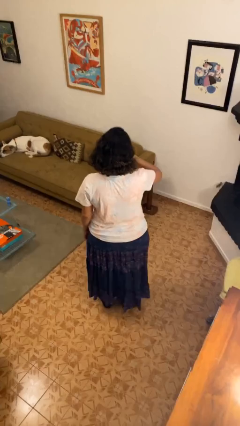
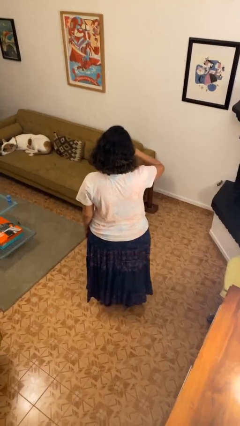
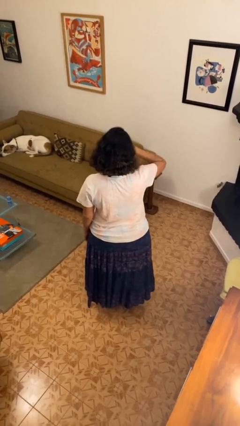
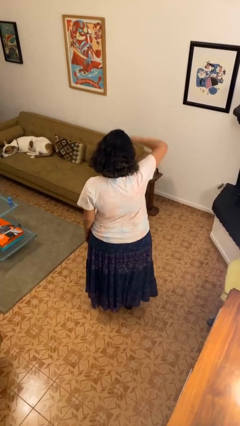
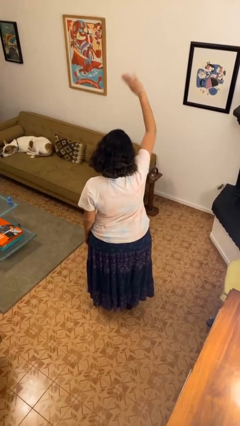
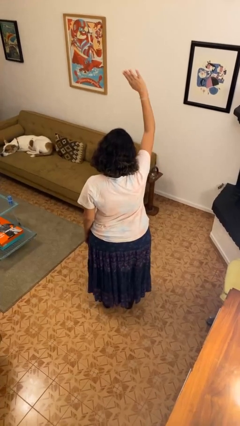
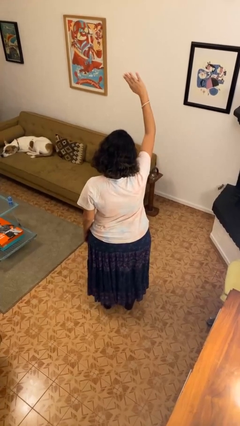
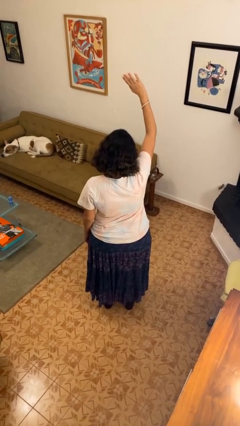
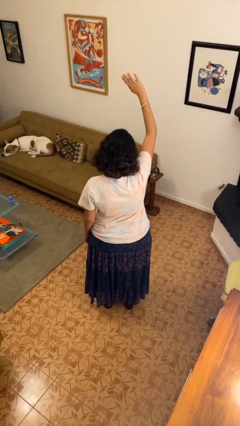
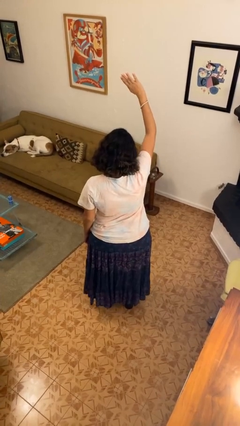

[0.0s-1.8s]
person gestures swipe up

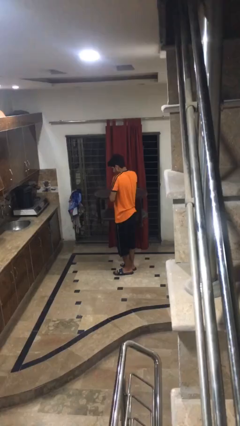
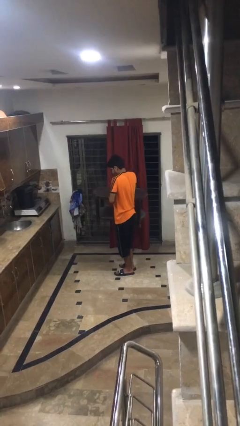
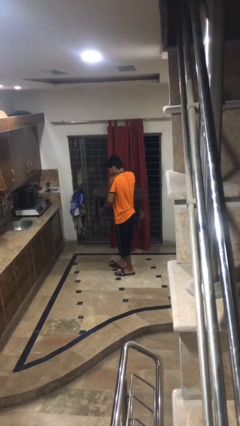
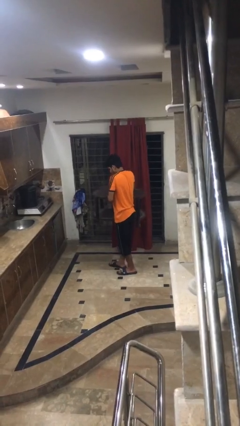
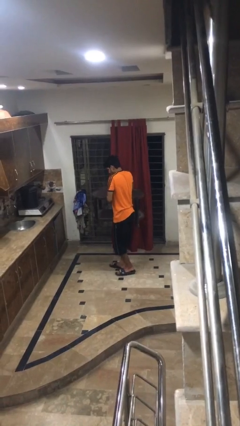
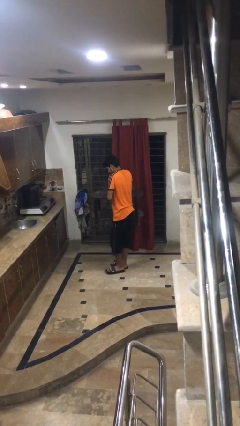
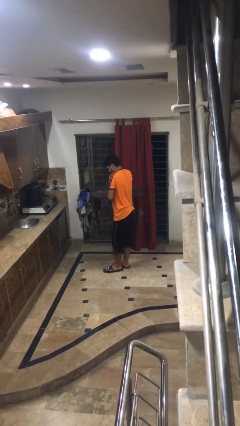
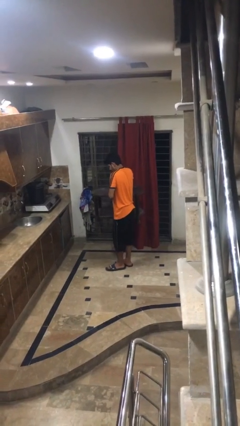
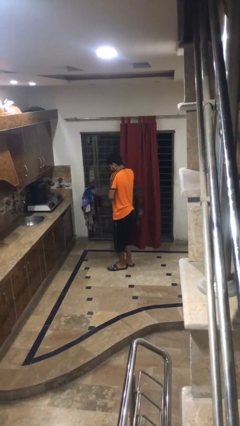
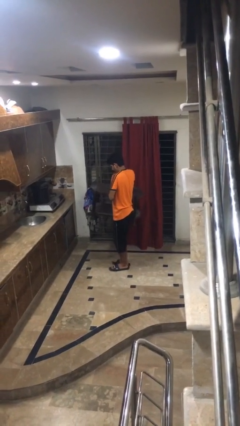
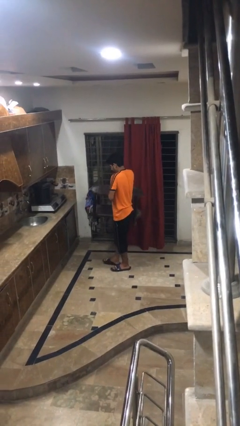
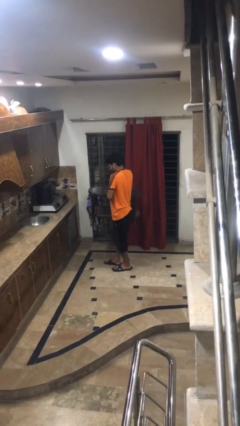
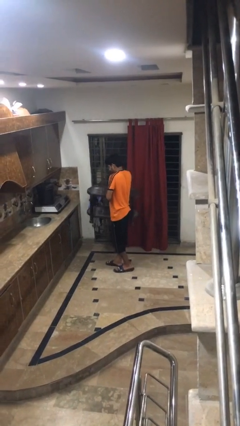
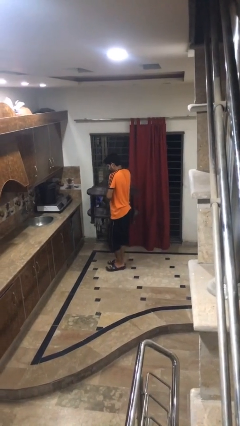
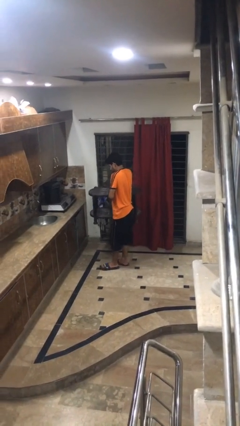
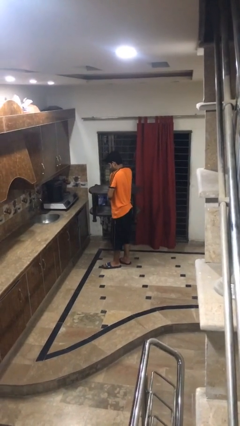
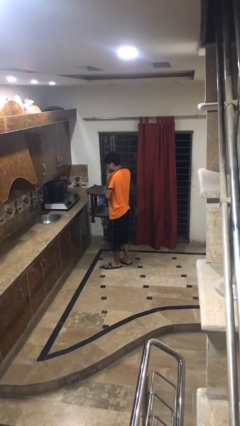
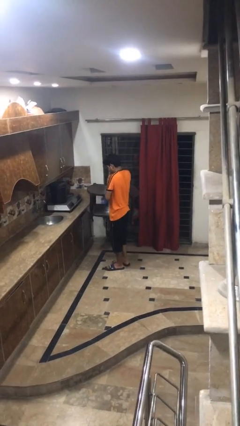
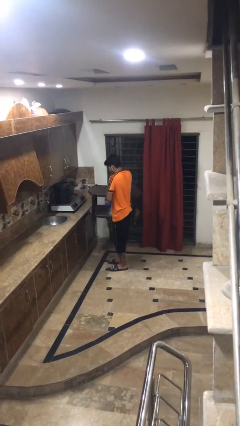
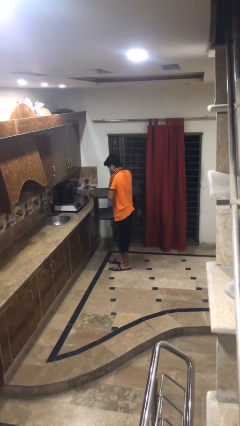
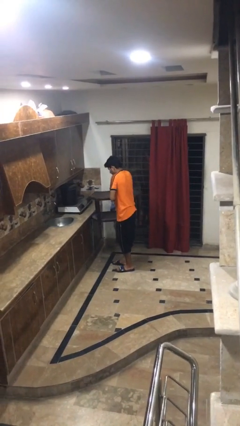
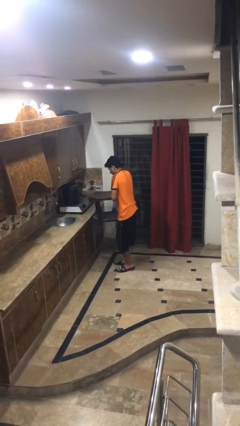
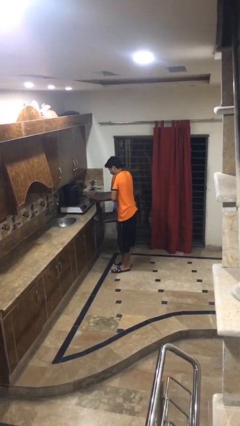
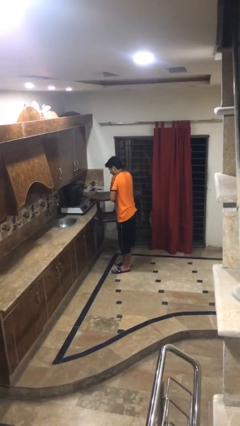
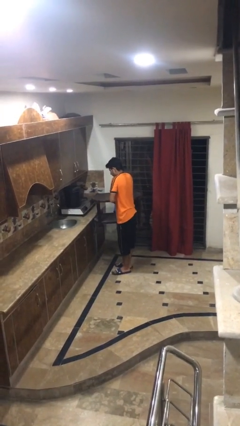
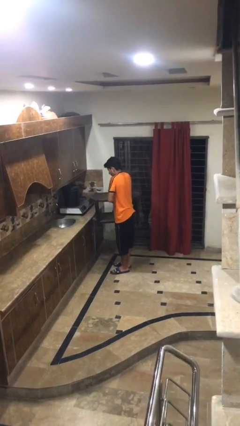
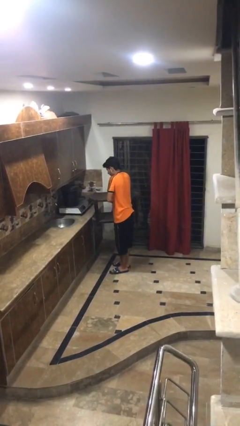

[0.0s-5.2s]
person carries furniture

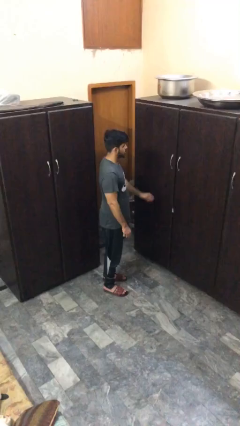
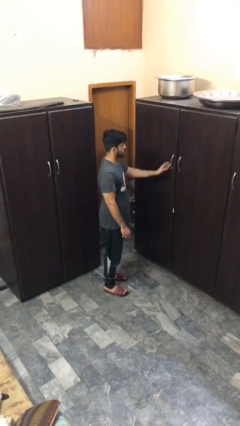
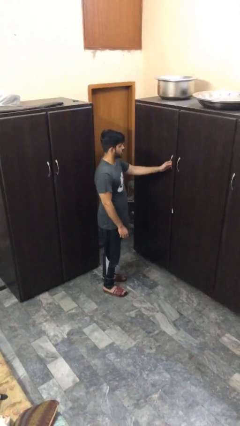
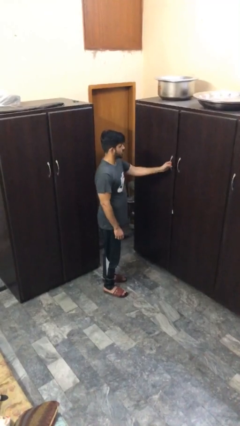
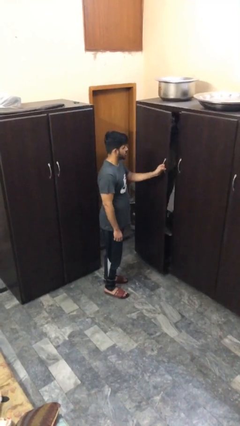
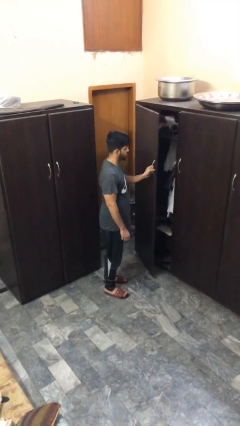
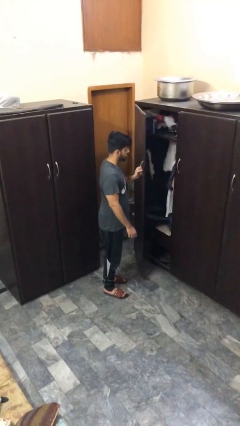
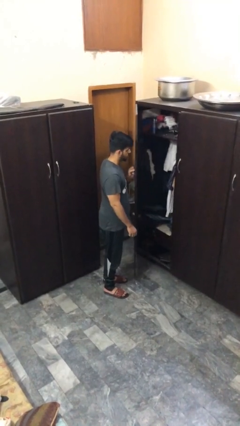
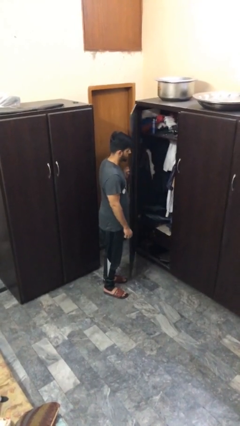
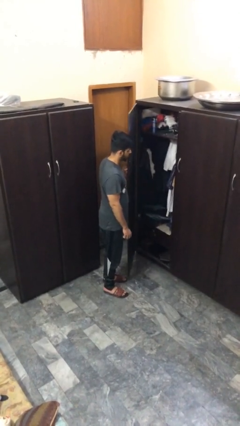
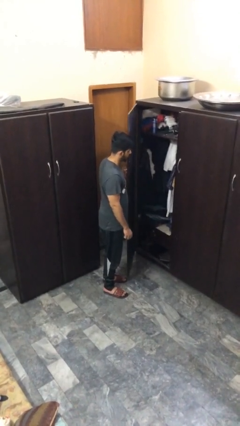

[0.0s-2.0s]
person opens dresser drawer

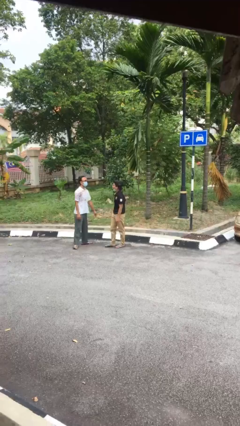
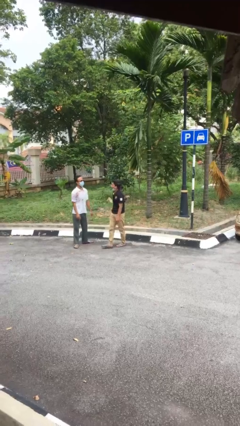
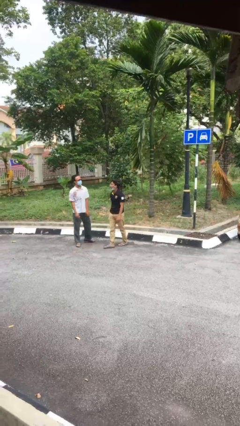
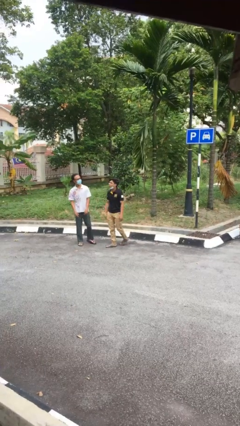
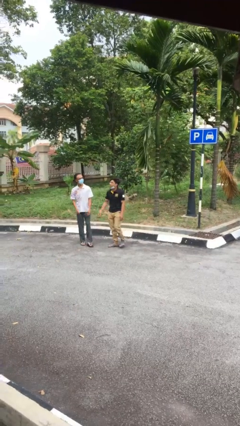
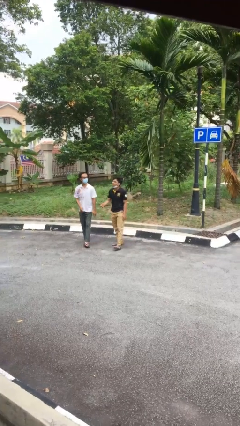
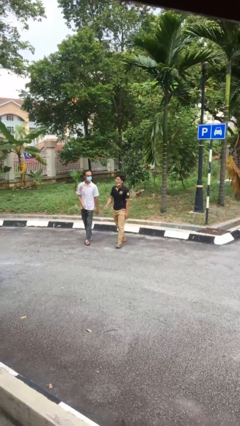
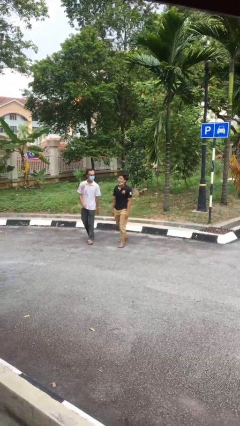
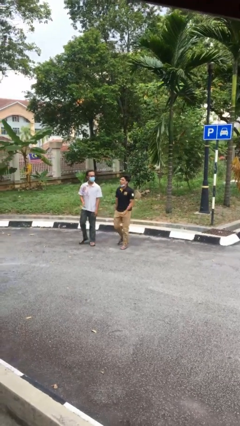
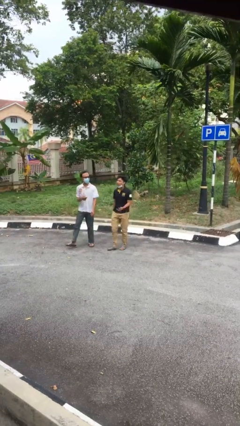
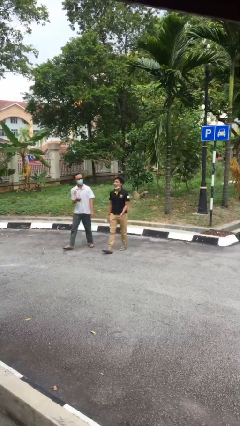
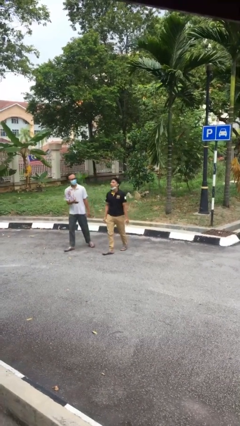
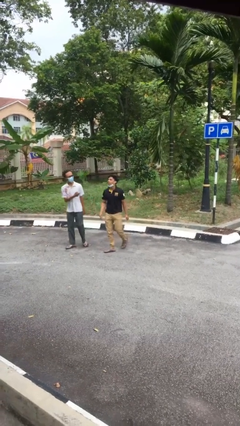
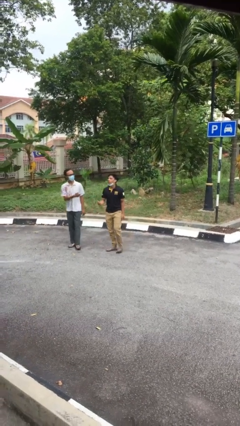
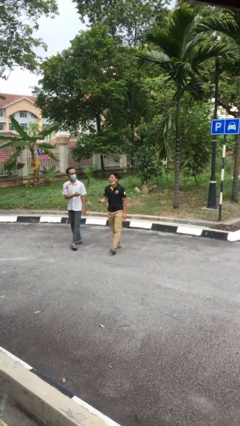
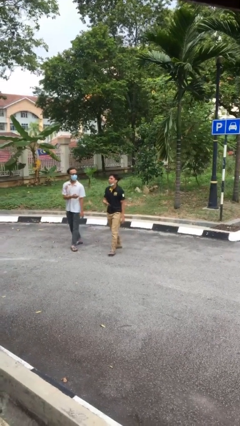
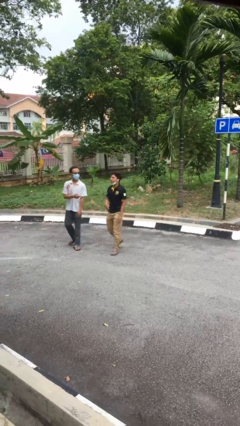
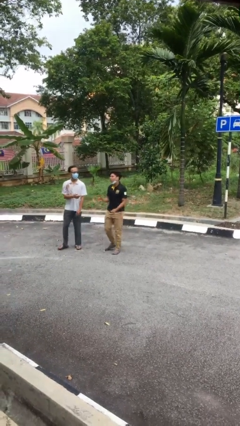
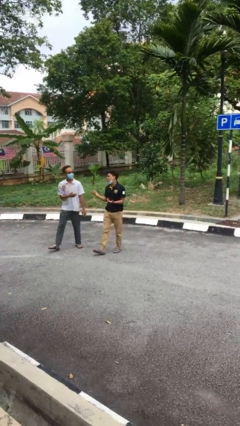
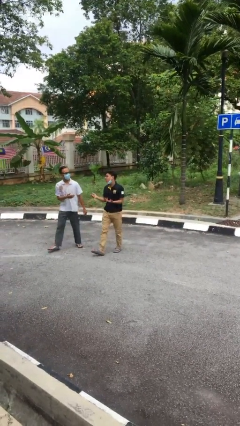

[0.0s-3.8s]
person talks to person

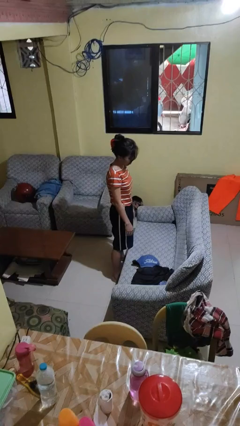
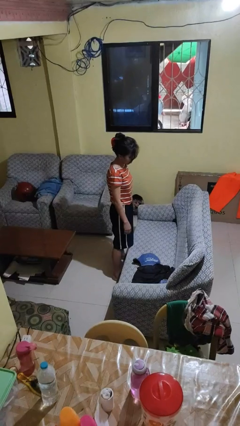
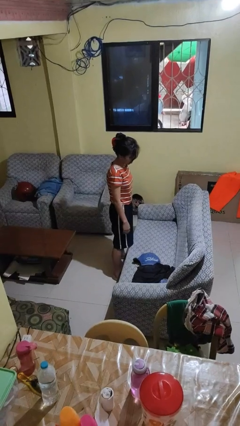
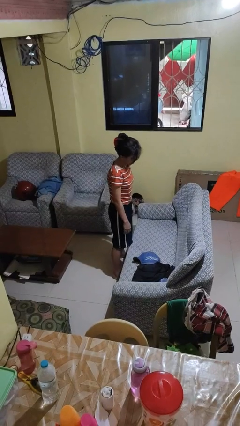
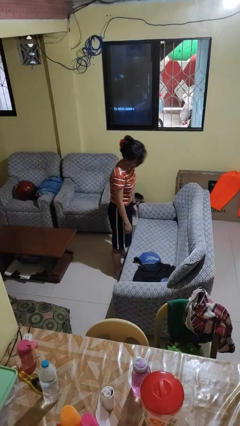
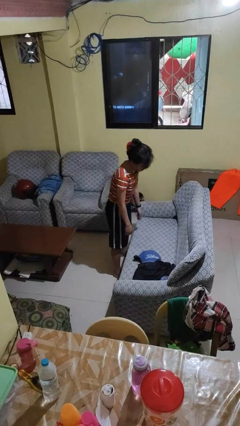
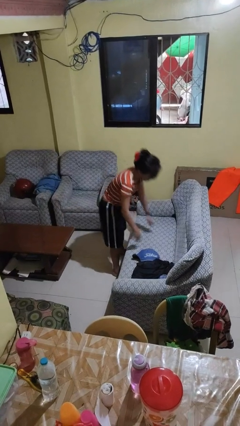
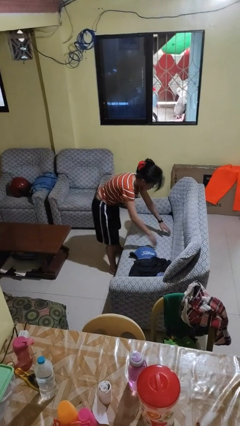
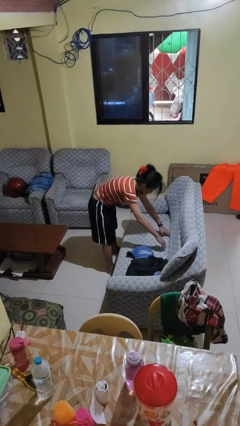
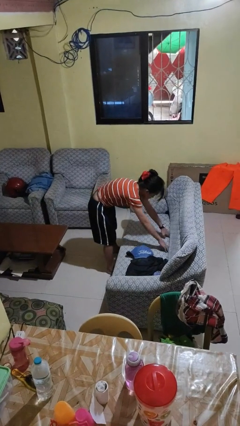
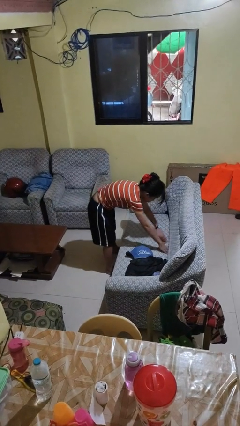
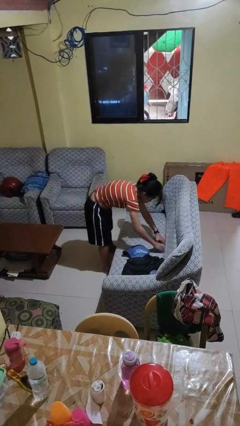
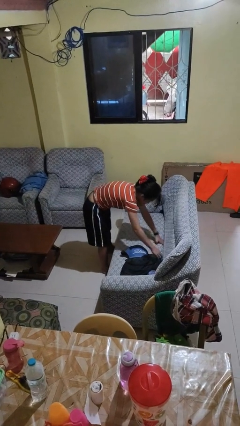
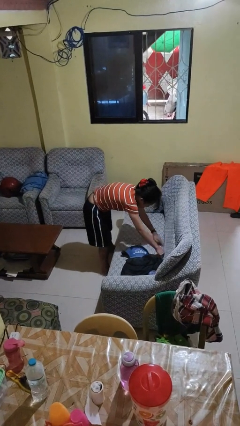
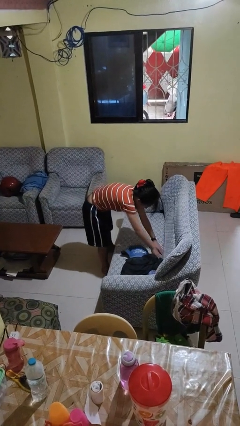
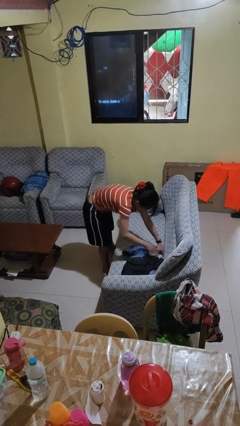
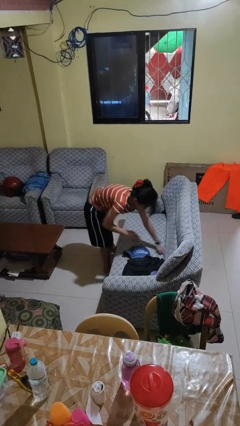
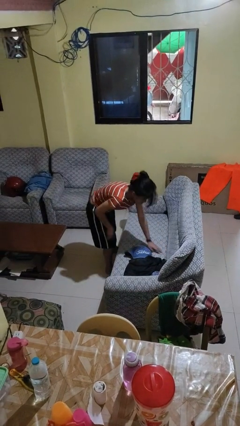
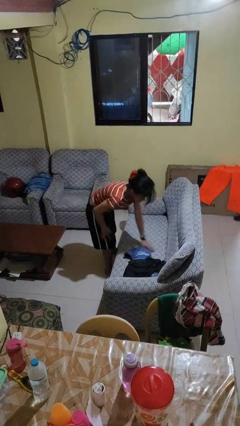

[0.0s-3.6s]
person searches in couch

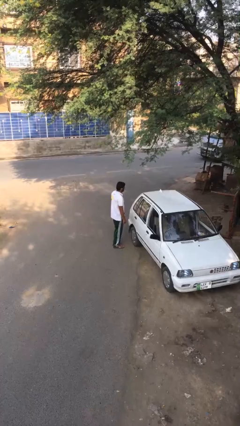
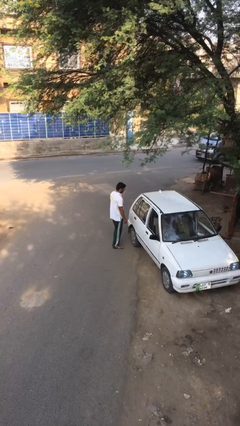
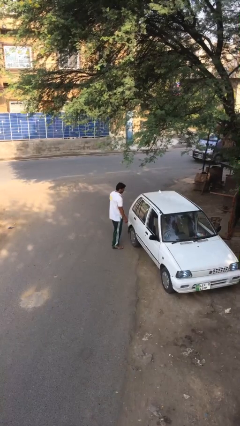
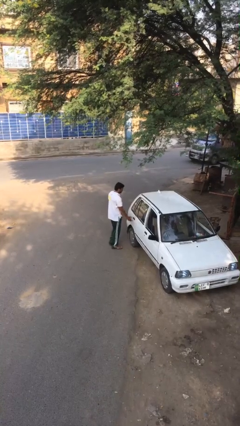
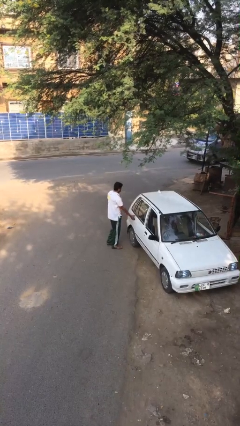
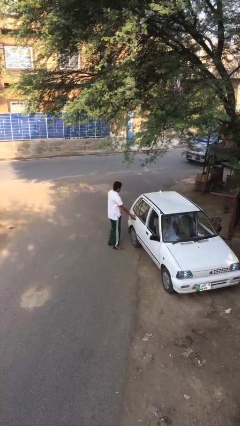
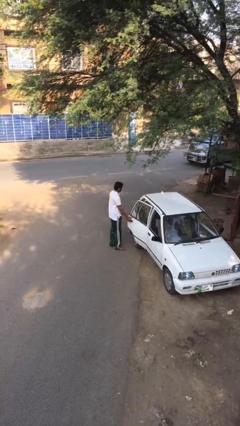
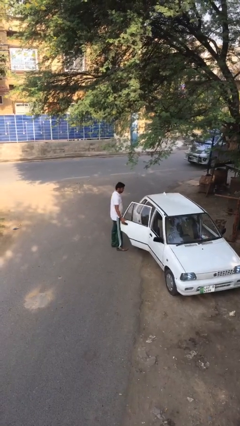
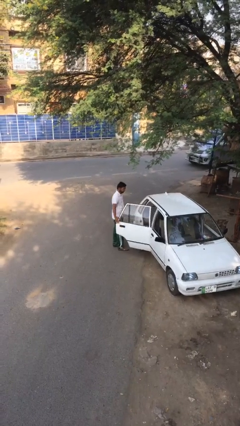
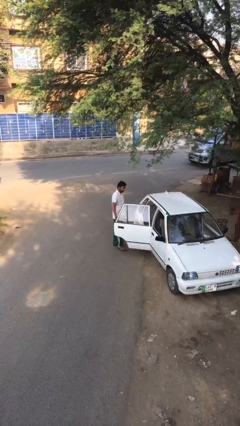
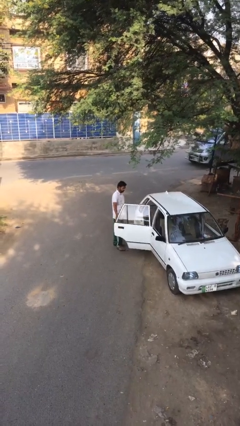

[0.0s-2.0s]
person opens car door
